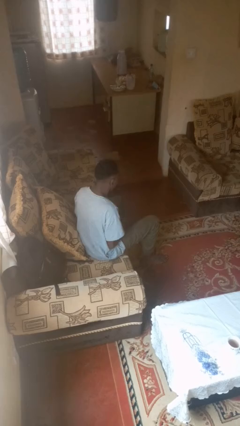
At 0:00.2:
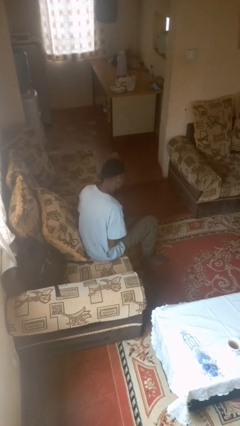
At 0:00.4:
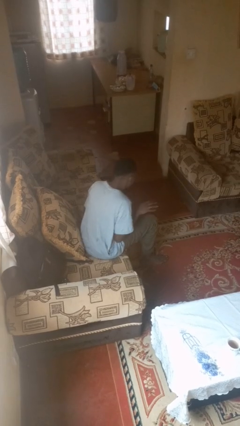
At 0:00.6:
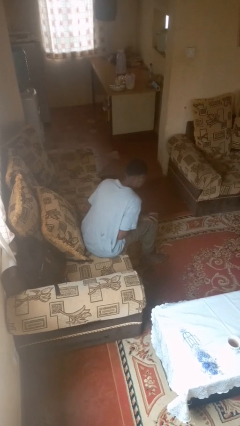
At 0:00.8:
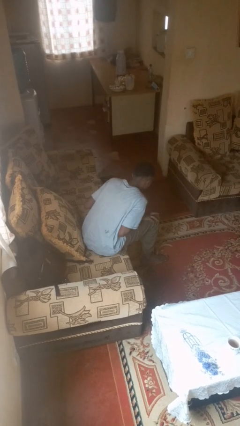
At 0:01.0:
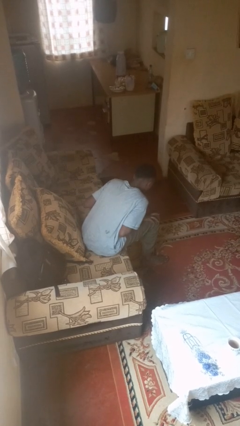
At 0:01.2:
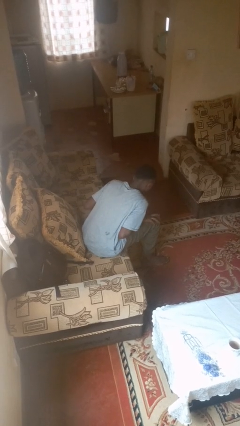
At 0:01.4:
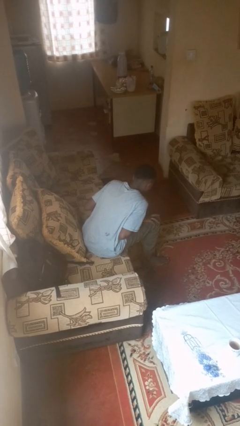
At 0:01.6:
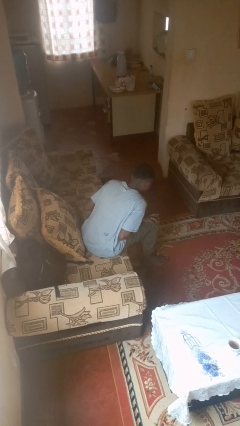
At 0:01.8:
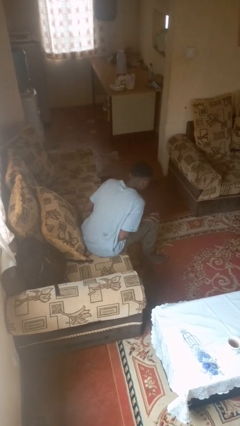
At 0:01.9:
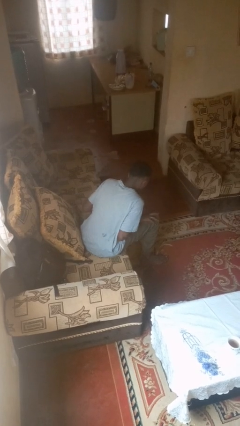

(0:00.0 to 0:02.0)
person slaps hands on thighs

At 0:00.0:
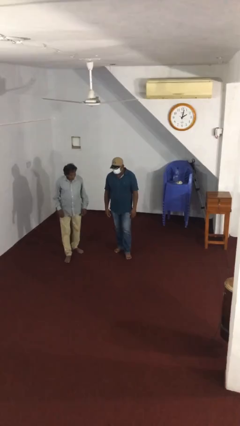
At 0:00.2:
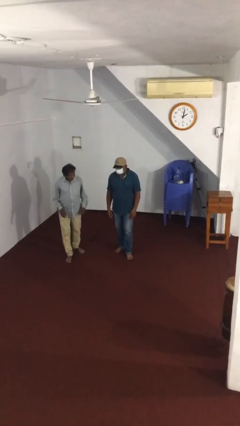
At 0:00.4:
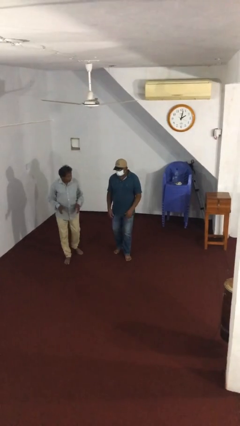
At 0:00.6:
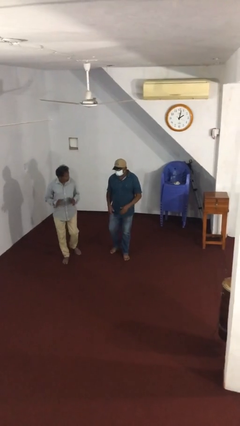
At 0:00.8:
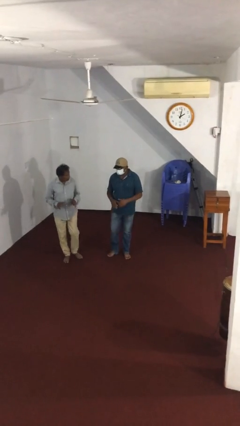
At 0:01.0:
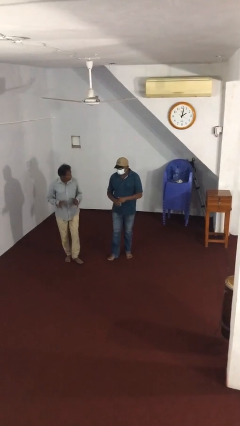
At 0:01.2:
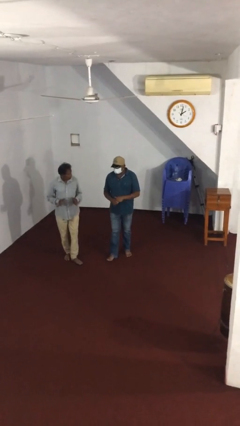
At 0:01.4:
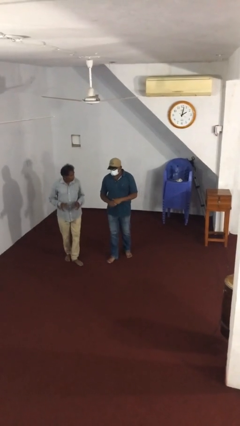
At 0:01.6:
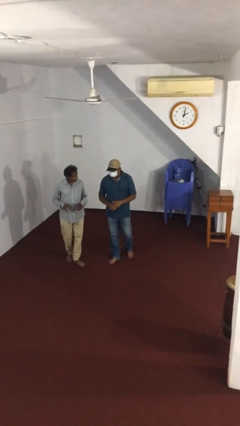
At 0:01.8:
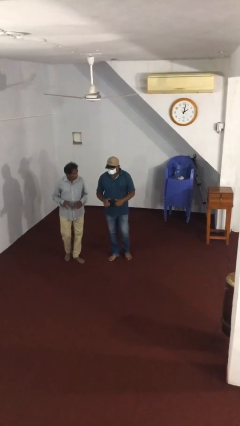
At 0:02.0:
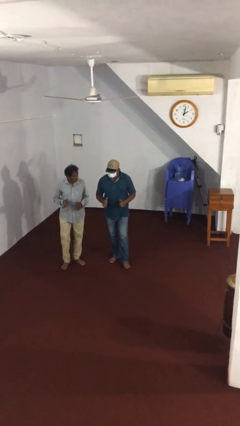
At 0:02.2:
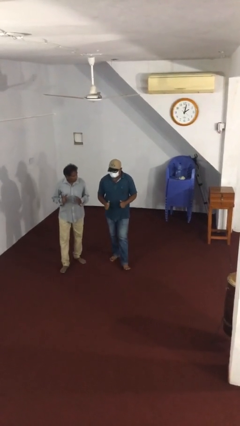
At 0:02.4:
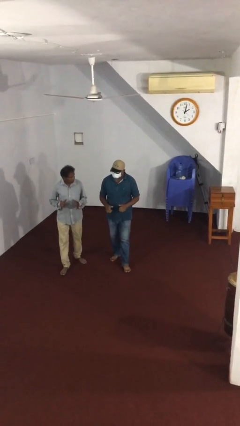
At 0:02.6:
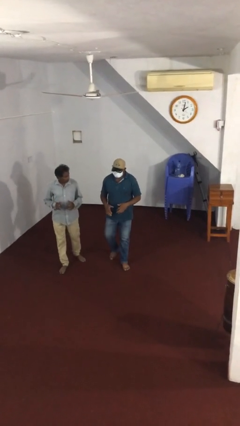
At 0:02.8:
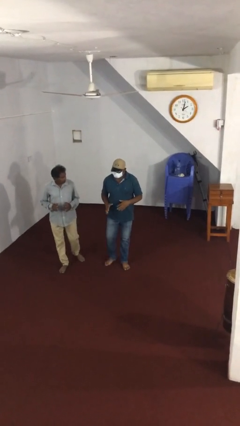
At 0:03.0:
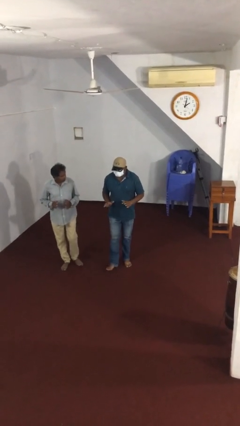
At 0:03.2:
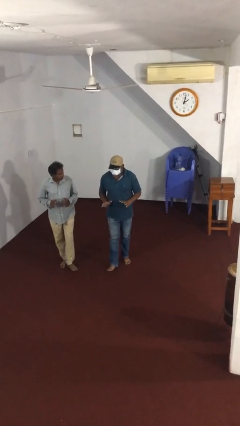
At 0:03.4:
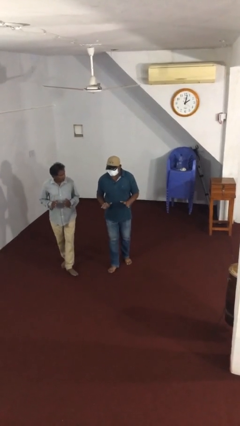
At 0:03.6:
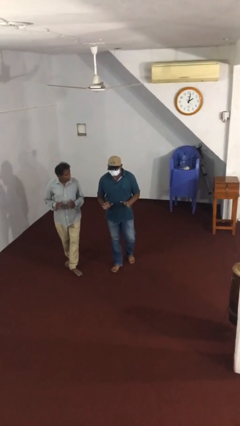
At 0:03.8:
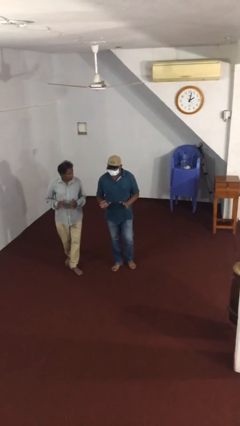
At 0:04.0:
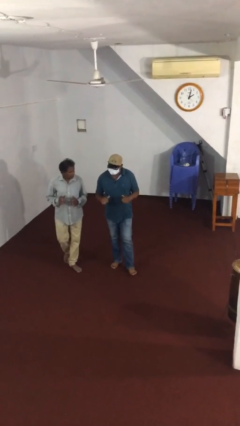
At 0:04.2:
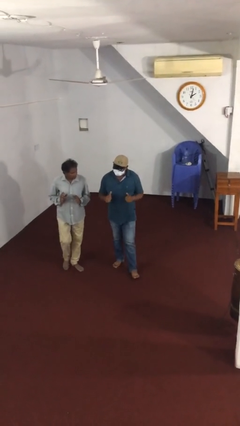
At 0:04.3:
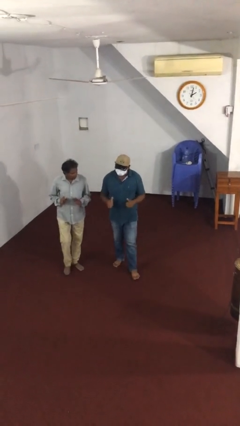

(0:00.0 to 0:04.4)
person talks to person

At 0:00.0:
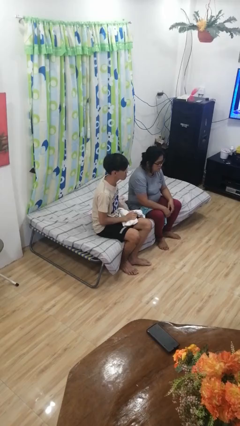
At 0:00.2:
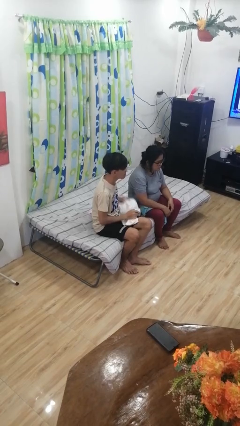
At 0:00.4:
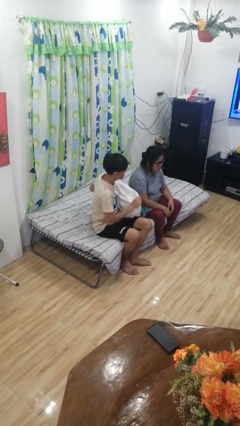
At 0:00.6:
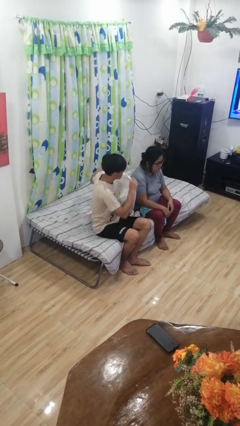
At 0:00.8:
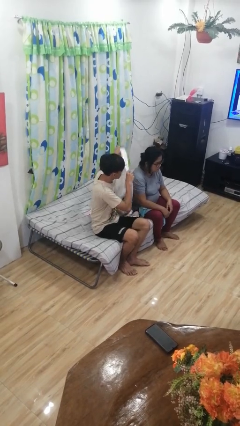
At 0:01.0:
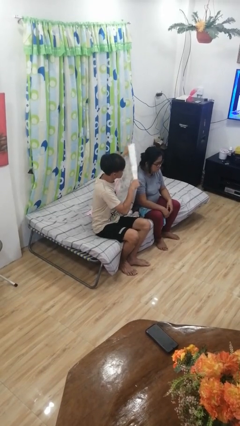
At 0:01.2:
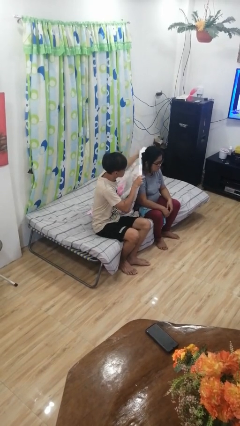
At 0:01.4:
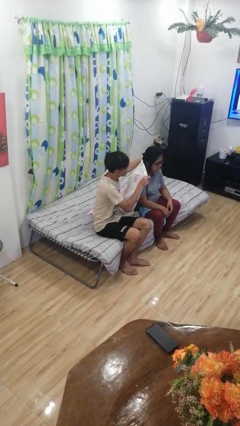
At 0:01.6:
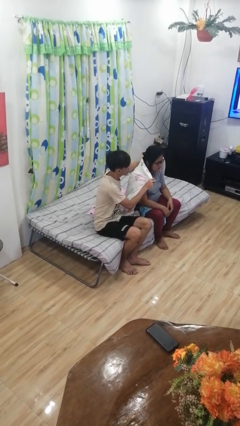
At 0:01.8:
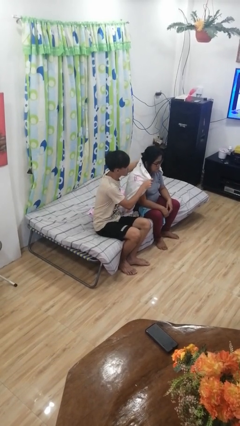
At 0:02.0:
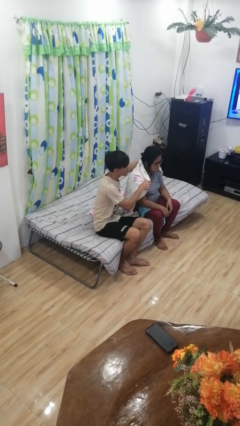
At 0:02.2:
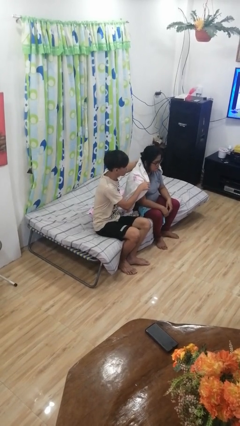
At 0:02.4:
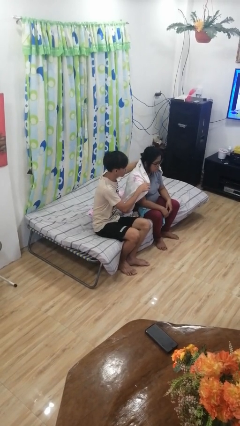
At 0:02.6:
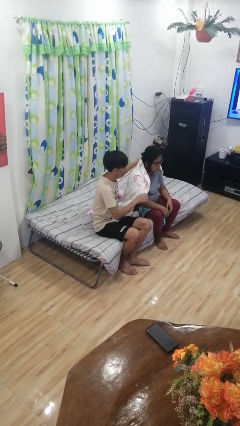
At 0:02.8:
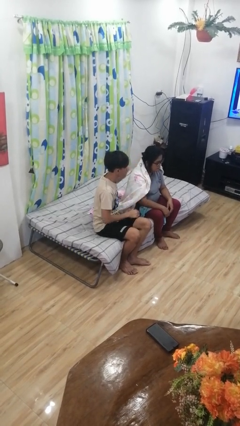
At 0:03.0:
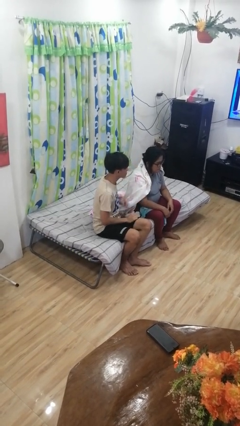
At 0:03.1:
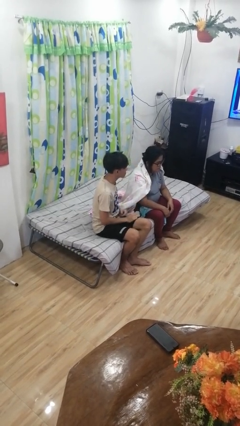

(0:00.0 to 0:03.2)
person covers friend with blanket

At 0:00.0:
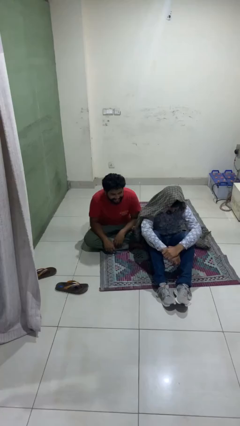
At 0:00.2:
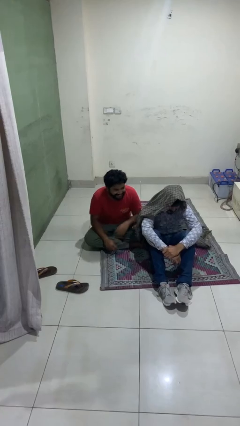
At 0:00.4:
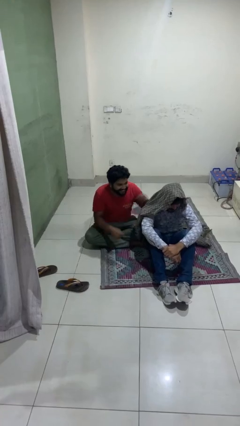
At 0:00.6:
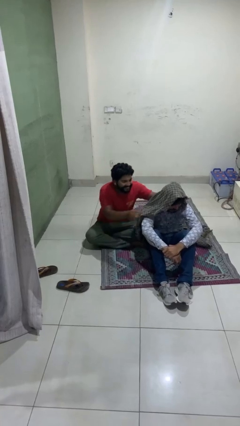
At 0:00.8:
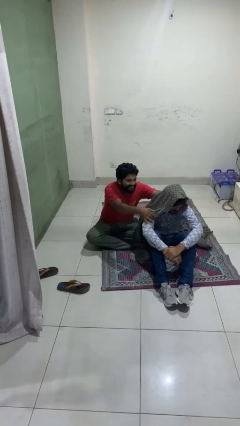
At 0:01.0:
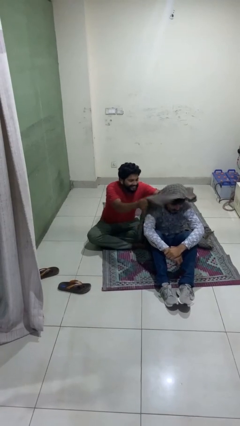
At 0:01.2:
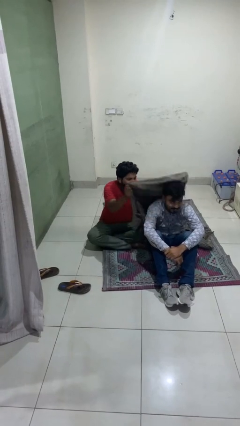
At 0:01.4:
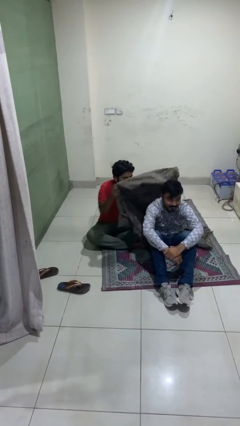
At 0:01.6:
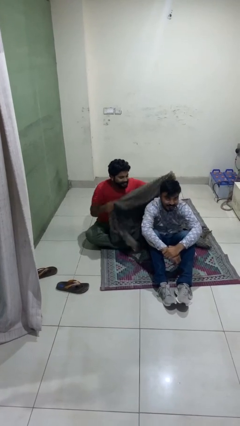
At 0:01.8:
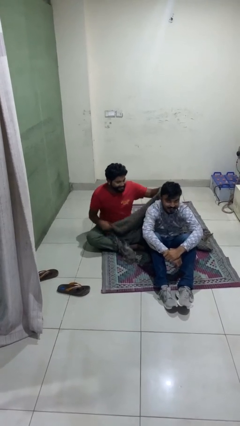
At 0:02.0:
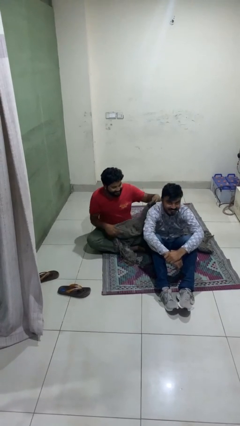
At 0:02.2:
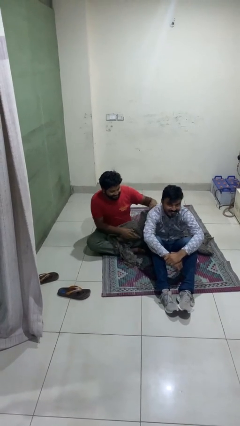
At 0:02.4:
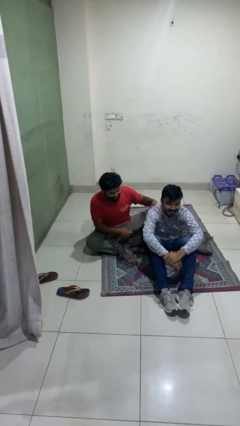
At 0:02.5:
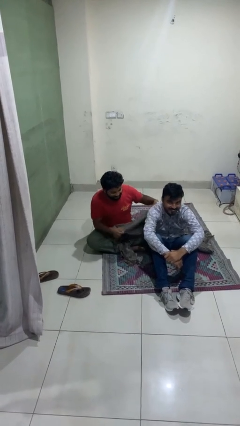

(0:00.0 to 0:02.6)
person uncovers friend with blanket

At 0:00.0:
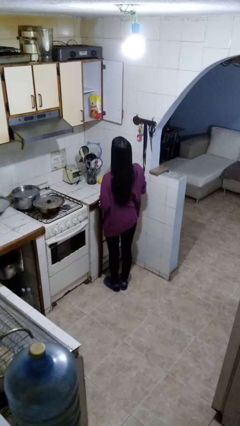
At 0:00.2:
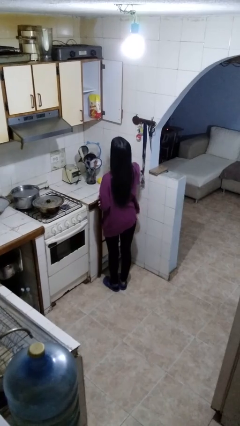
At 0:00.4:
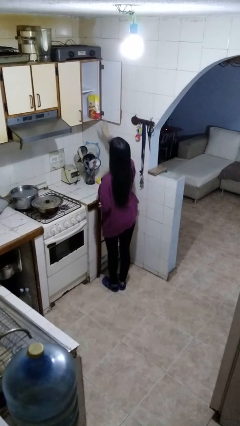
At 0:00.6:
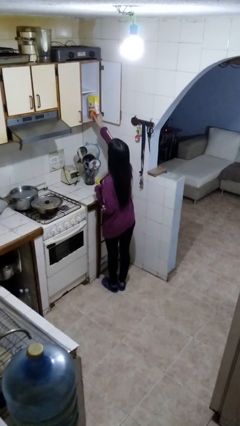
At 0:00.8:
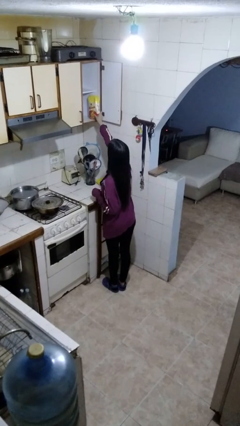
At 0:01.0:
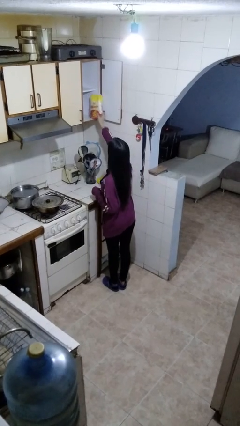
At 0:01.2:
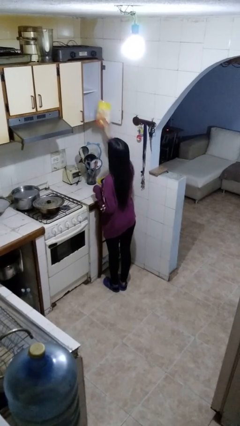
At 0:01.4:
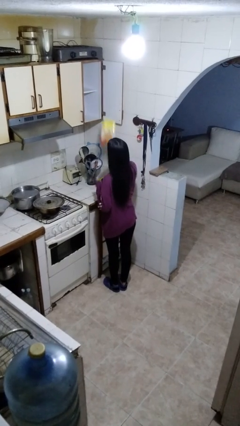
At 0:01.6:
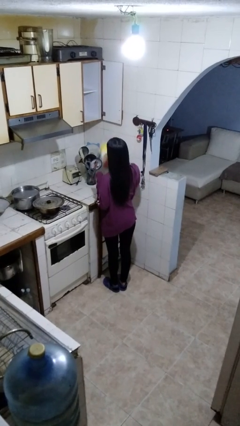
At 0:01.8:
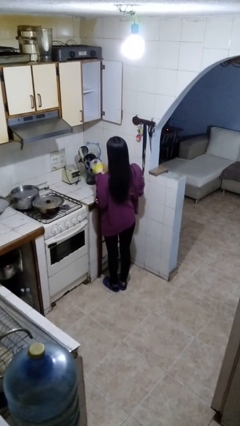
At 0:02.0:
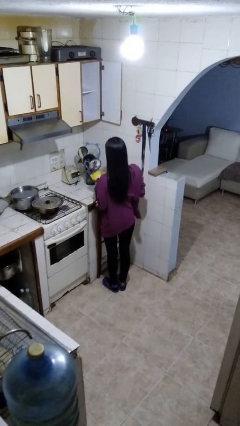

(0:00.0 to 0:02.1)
person puts down object into cabinet

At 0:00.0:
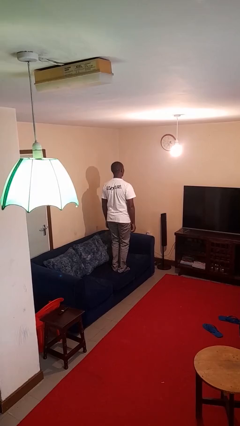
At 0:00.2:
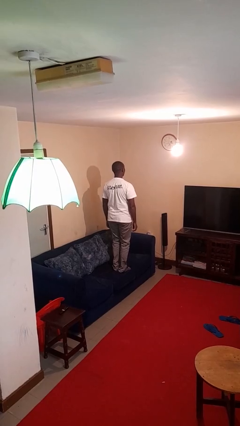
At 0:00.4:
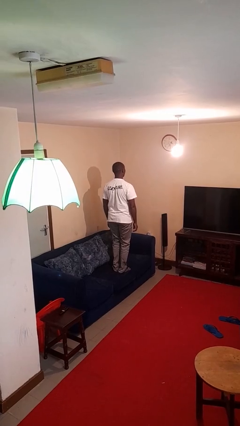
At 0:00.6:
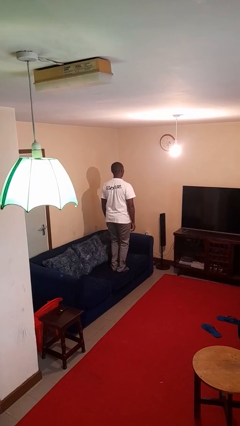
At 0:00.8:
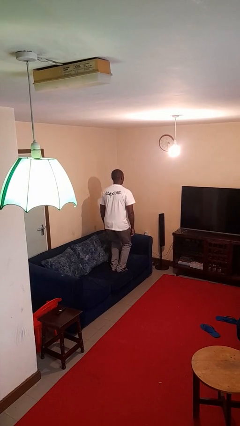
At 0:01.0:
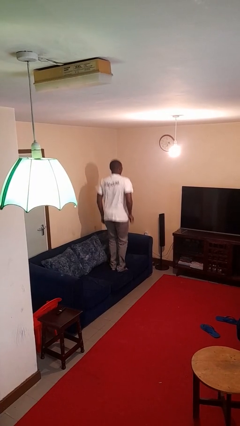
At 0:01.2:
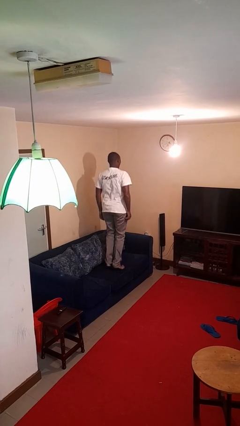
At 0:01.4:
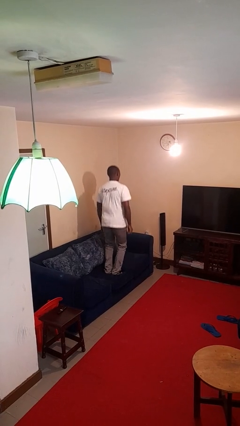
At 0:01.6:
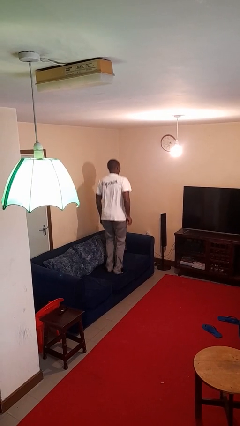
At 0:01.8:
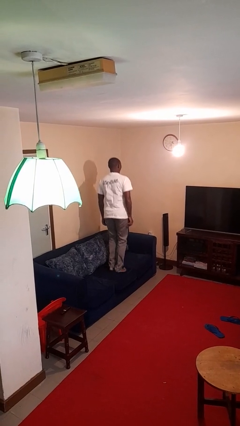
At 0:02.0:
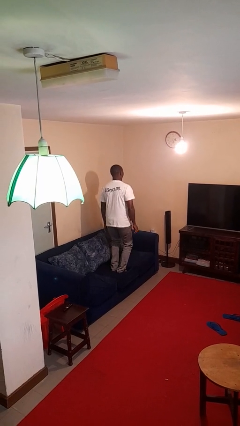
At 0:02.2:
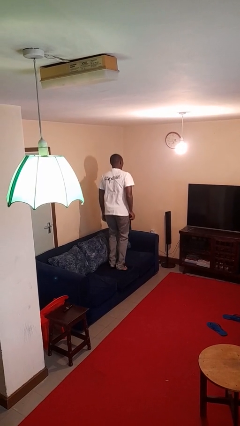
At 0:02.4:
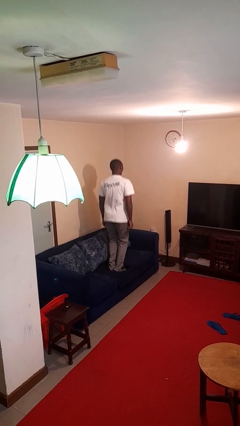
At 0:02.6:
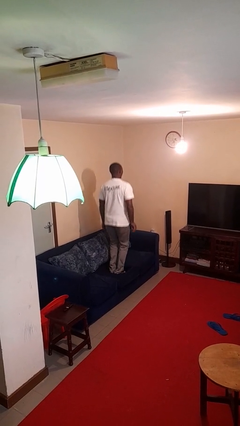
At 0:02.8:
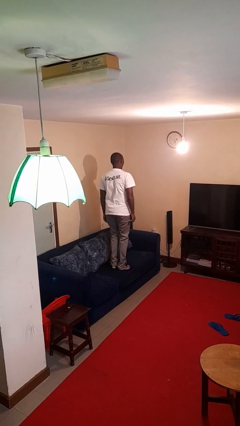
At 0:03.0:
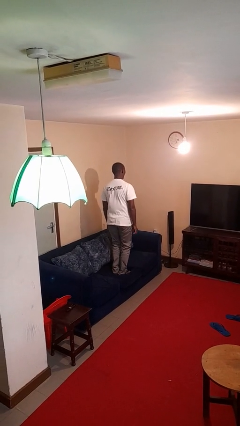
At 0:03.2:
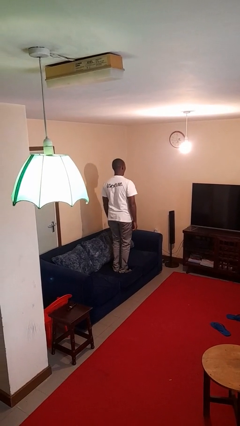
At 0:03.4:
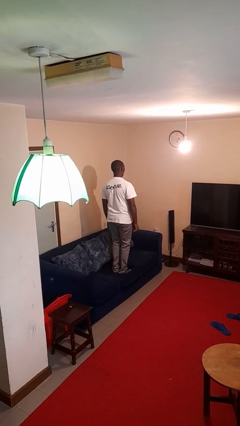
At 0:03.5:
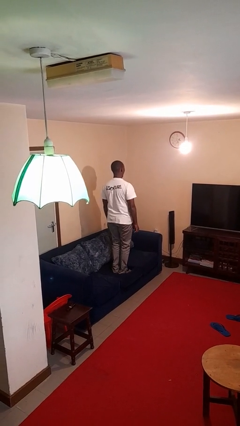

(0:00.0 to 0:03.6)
person jumps on couch
